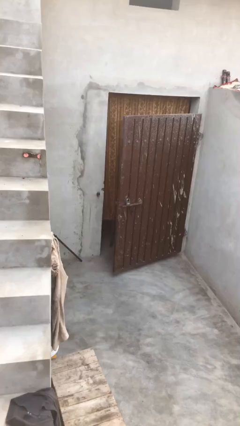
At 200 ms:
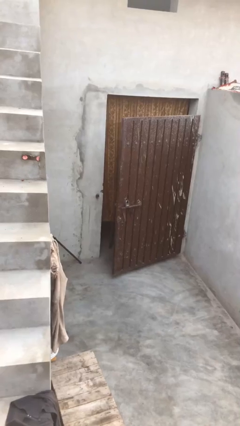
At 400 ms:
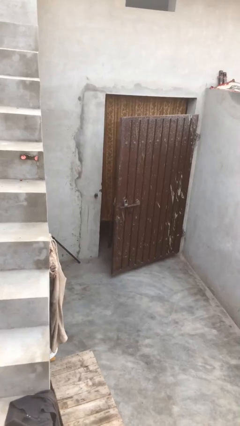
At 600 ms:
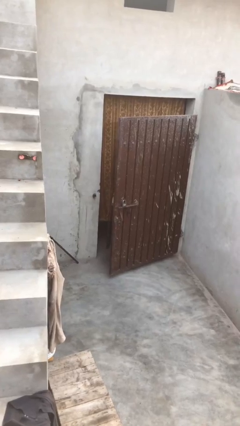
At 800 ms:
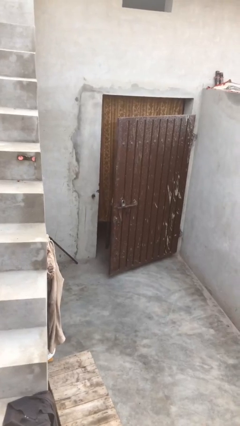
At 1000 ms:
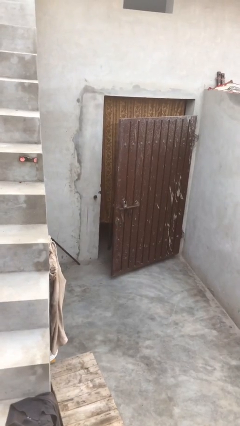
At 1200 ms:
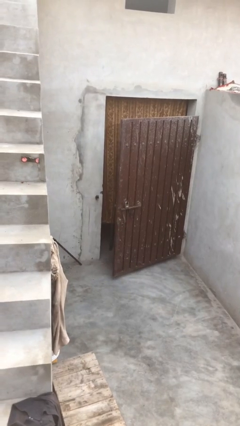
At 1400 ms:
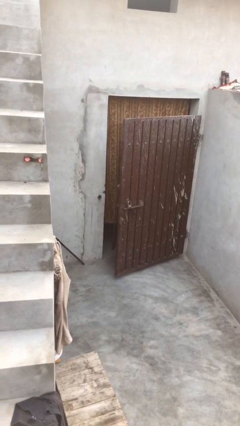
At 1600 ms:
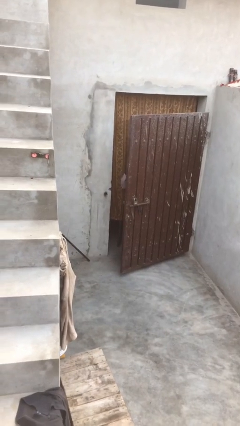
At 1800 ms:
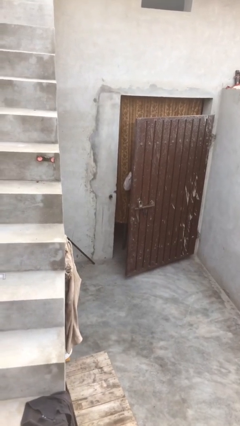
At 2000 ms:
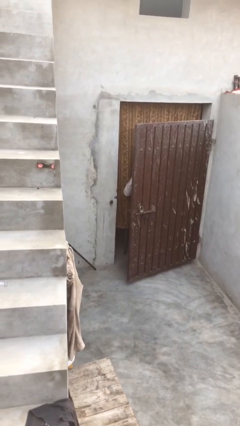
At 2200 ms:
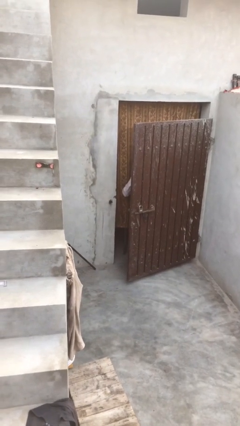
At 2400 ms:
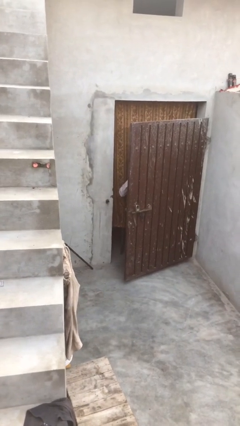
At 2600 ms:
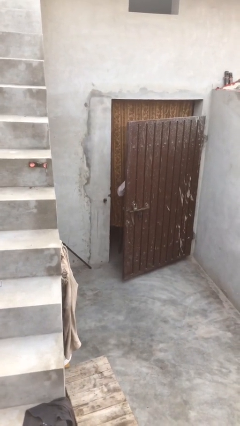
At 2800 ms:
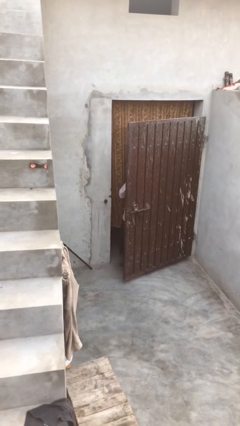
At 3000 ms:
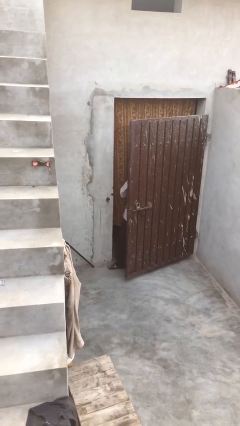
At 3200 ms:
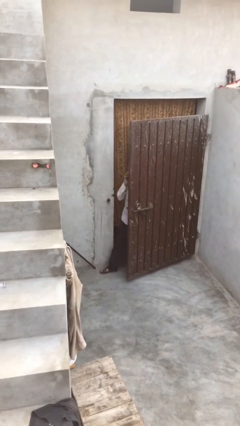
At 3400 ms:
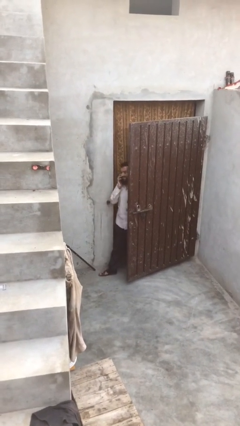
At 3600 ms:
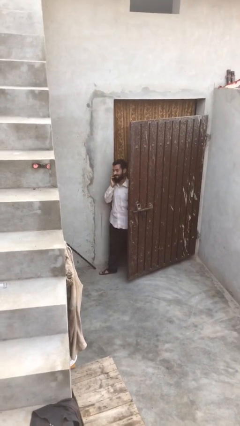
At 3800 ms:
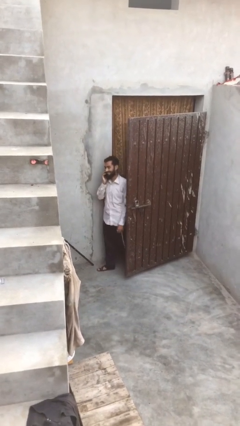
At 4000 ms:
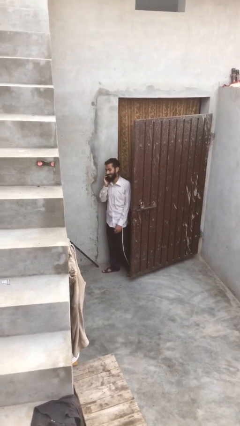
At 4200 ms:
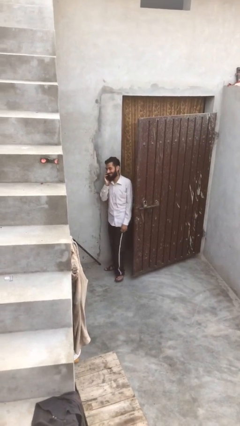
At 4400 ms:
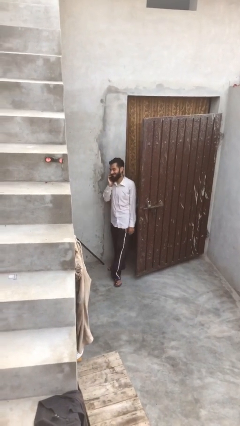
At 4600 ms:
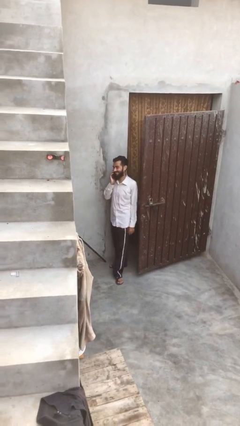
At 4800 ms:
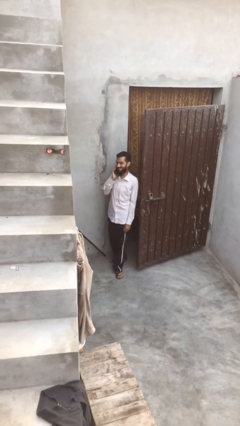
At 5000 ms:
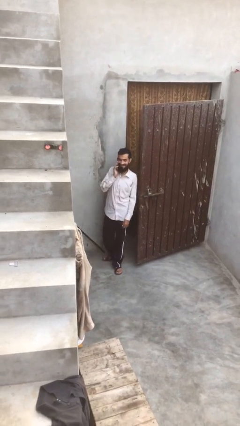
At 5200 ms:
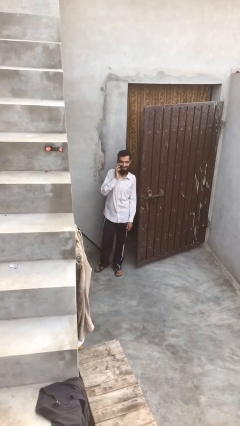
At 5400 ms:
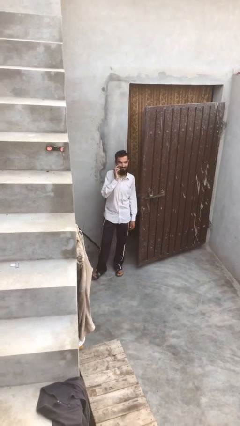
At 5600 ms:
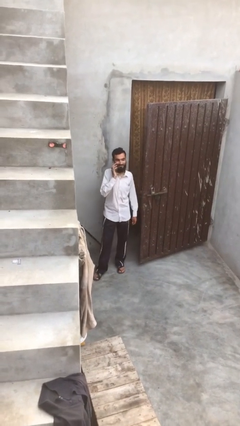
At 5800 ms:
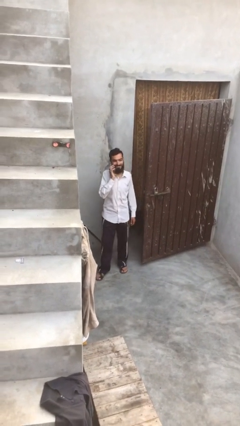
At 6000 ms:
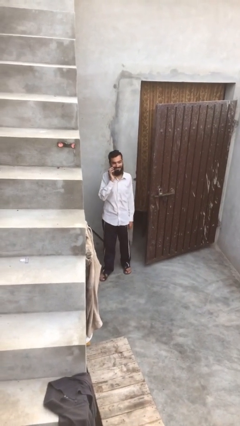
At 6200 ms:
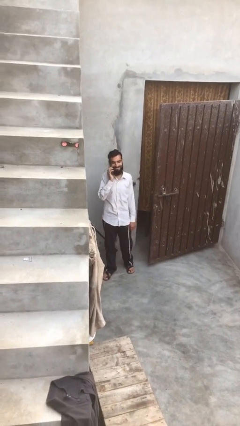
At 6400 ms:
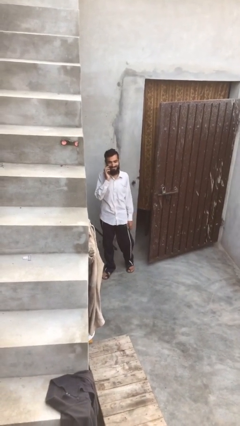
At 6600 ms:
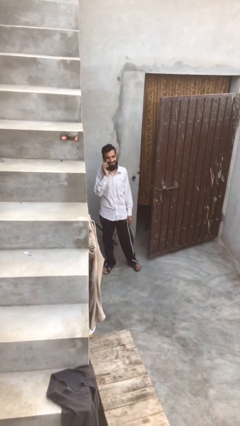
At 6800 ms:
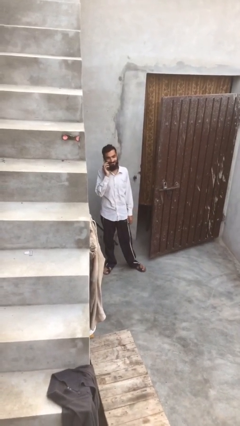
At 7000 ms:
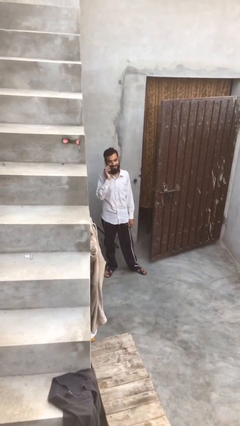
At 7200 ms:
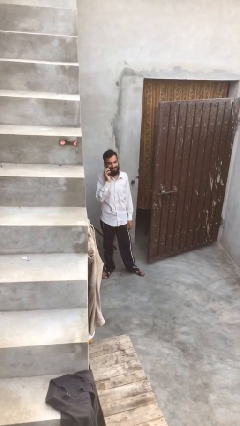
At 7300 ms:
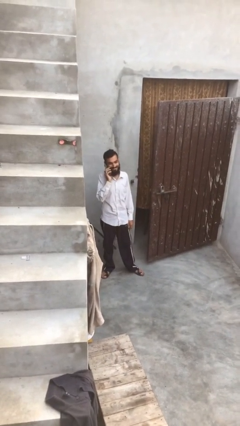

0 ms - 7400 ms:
person enters scene through structure

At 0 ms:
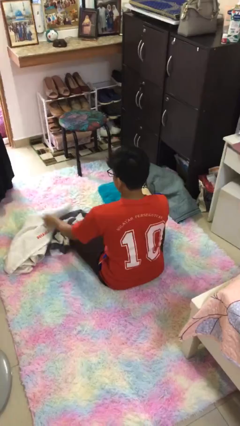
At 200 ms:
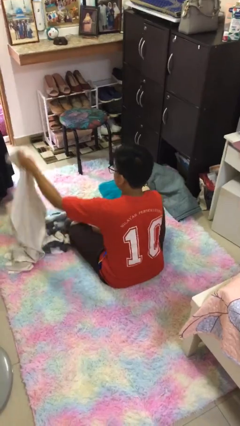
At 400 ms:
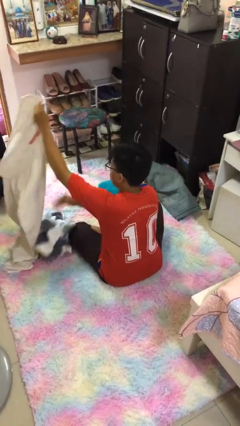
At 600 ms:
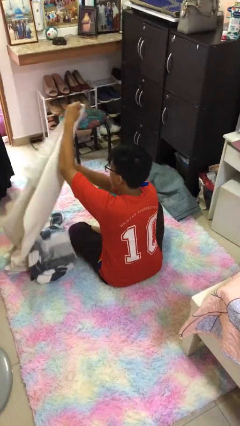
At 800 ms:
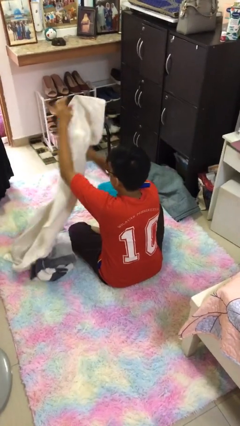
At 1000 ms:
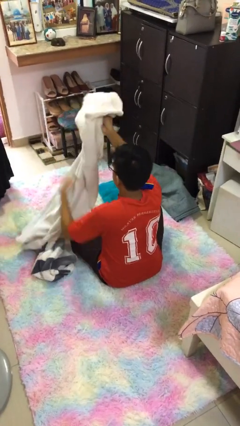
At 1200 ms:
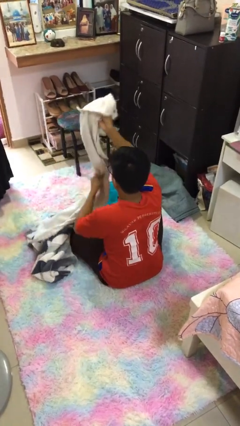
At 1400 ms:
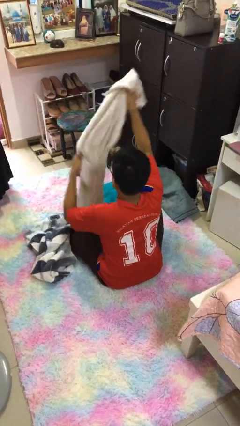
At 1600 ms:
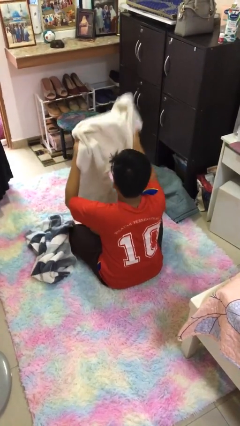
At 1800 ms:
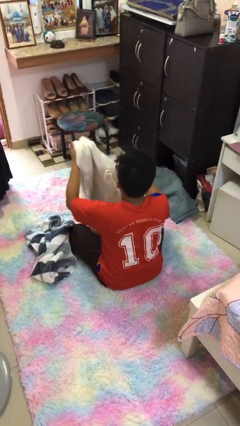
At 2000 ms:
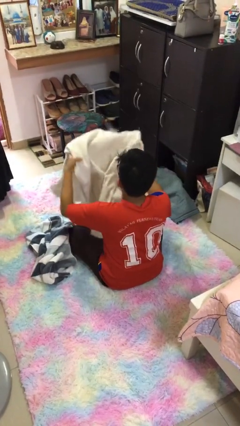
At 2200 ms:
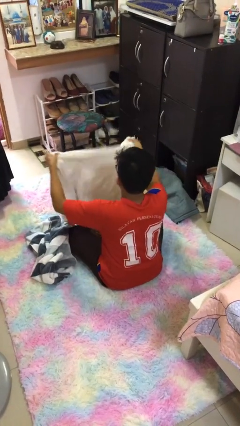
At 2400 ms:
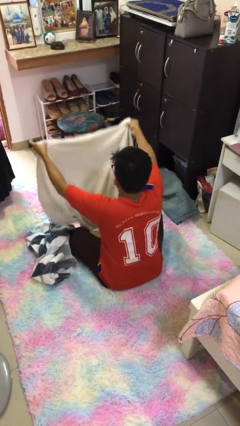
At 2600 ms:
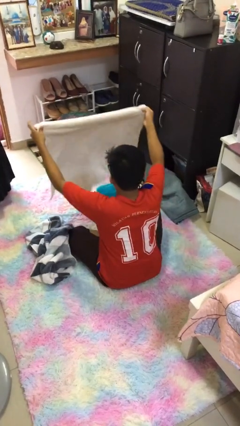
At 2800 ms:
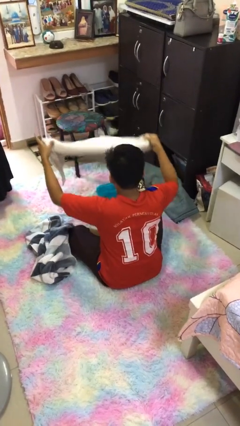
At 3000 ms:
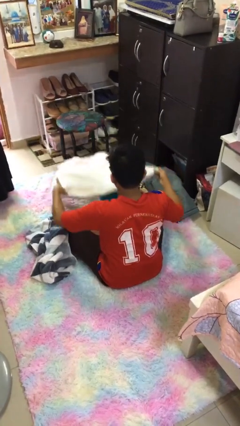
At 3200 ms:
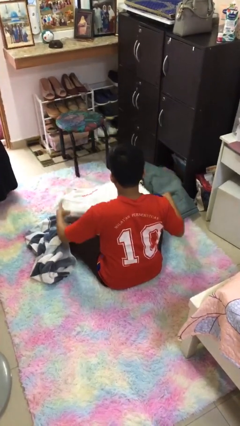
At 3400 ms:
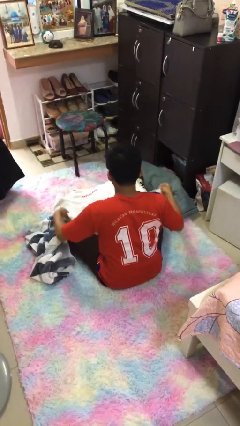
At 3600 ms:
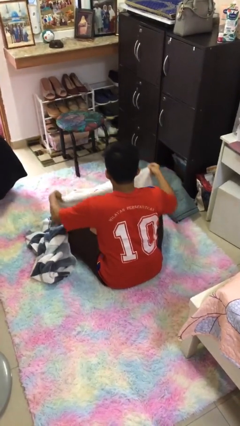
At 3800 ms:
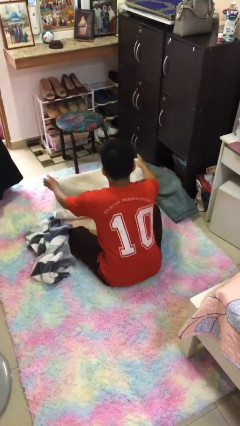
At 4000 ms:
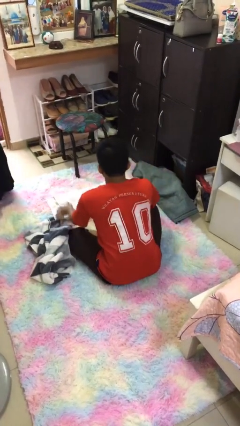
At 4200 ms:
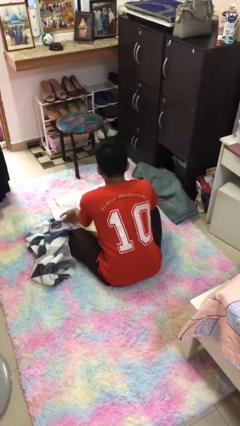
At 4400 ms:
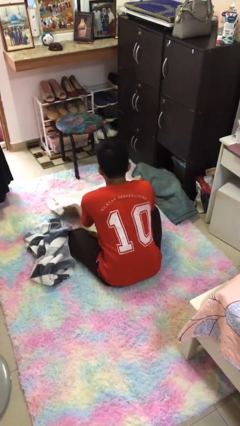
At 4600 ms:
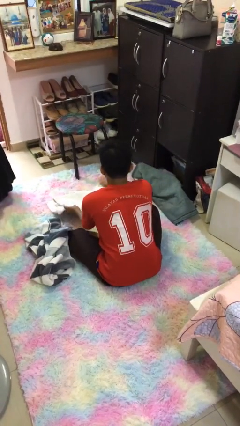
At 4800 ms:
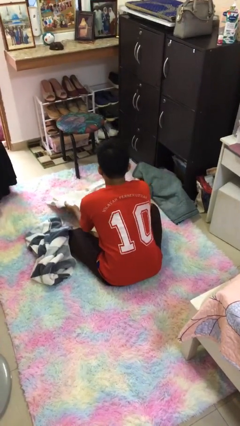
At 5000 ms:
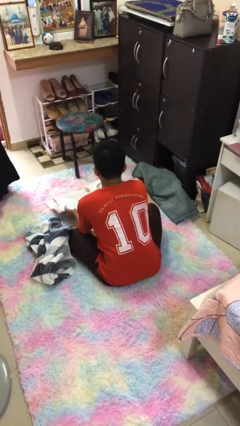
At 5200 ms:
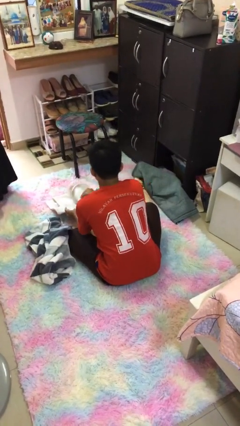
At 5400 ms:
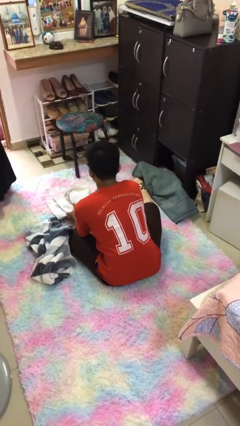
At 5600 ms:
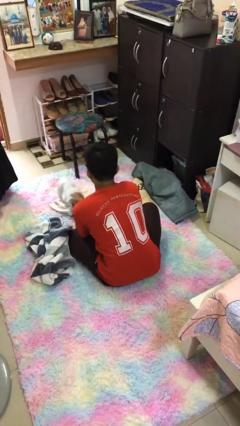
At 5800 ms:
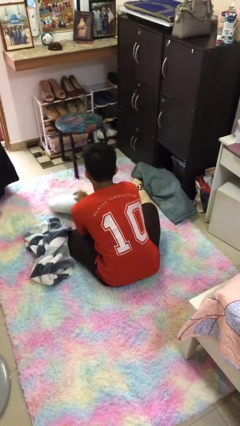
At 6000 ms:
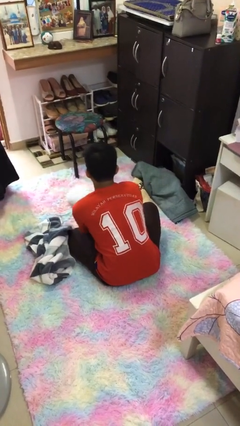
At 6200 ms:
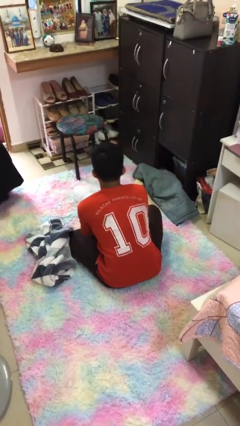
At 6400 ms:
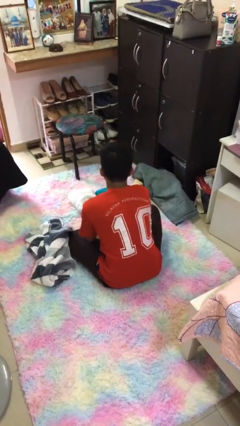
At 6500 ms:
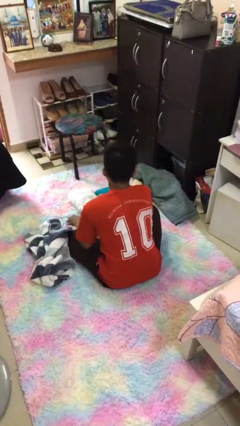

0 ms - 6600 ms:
person folds towel

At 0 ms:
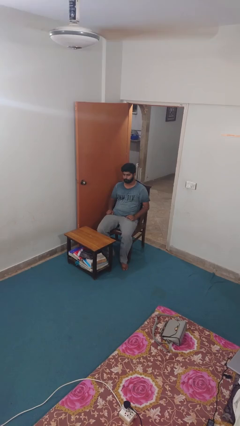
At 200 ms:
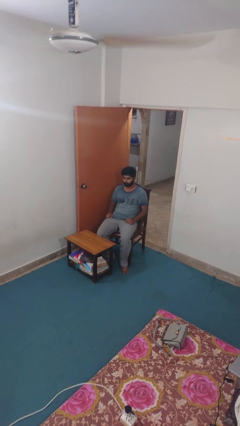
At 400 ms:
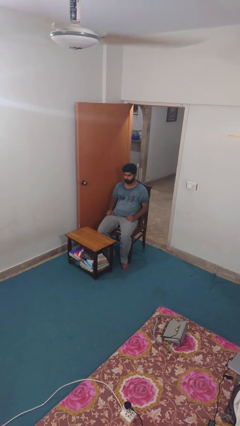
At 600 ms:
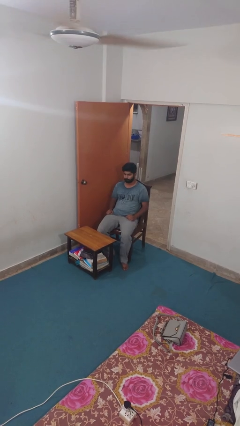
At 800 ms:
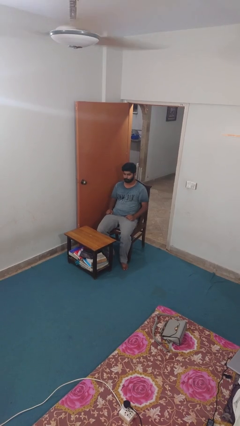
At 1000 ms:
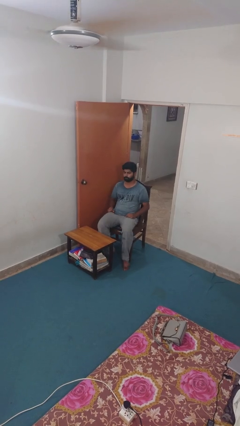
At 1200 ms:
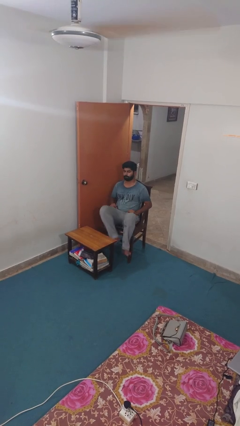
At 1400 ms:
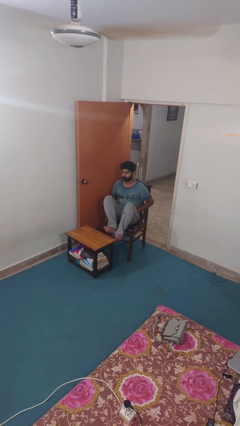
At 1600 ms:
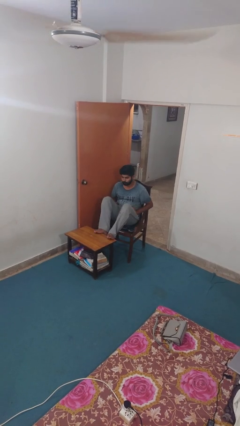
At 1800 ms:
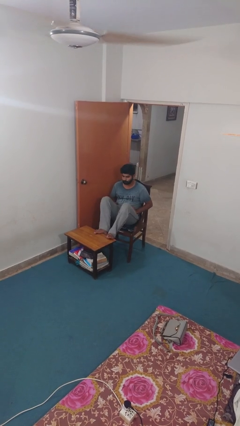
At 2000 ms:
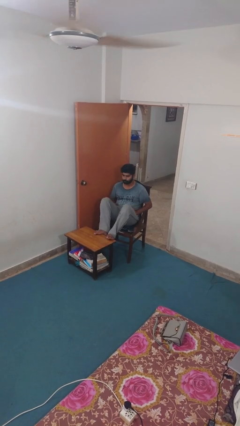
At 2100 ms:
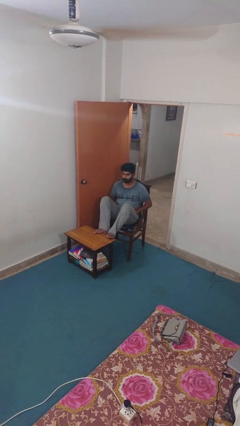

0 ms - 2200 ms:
person puts feet up

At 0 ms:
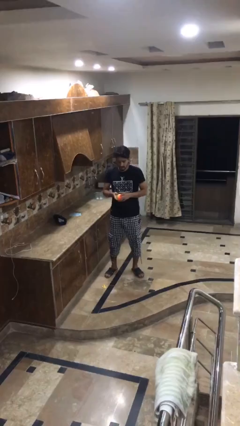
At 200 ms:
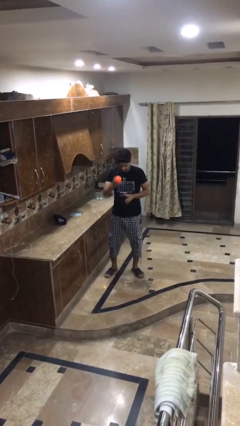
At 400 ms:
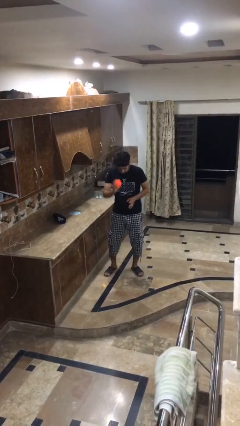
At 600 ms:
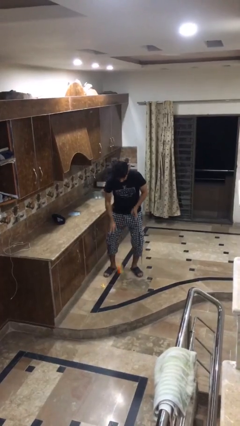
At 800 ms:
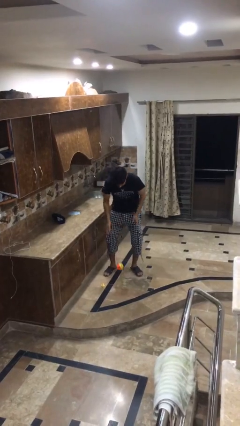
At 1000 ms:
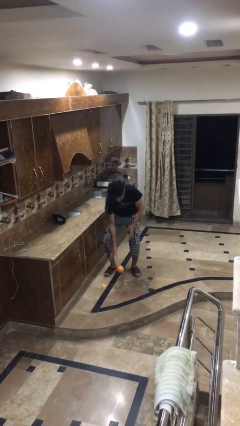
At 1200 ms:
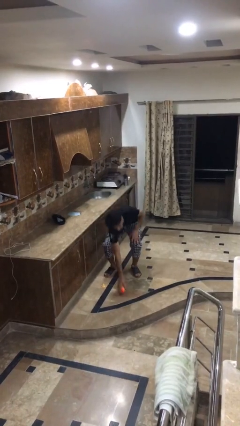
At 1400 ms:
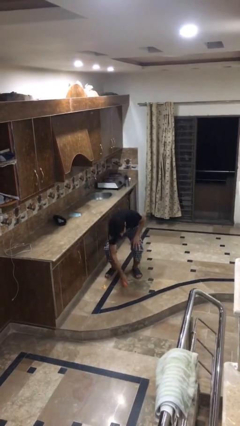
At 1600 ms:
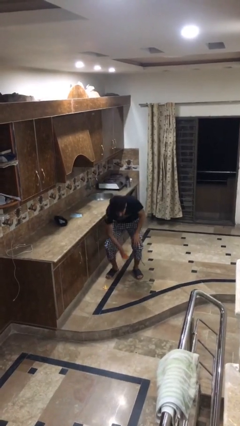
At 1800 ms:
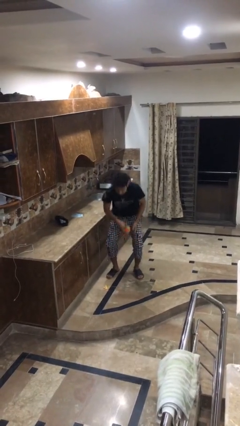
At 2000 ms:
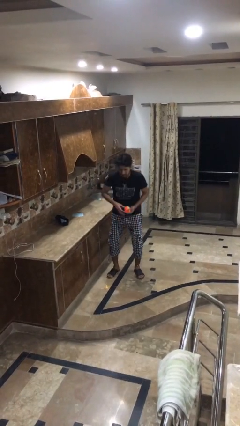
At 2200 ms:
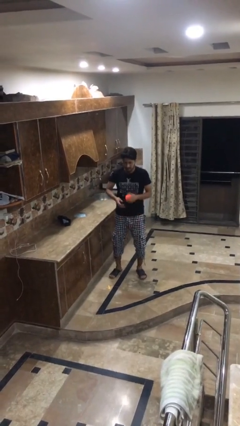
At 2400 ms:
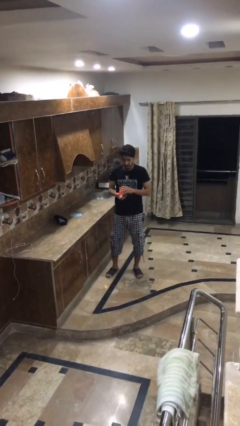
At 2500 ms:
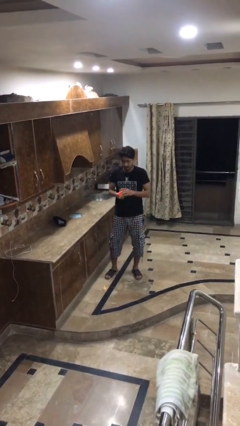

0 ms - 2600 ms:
person bounces ball on floor
